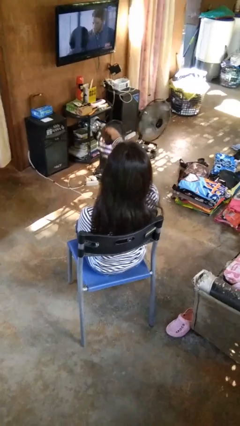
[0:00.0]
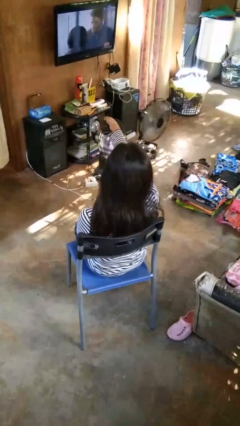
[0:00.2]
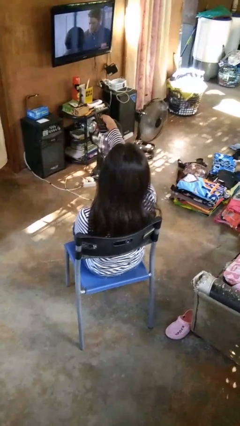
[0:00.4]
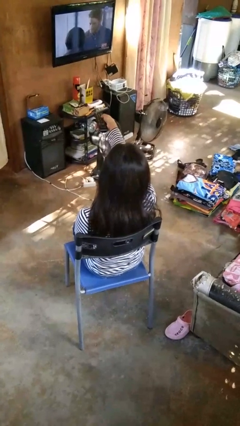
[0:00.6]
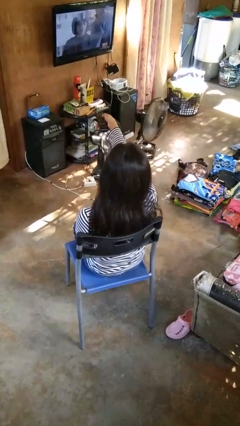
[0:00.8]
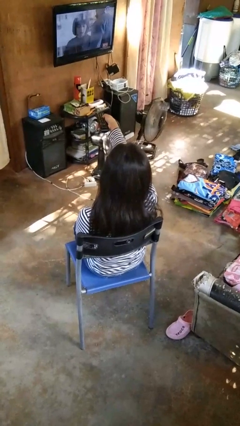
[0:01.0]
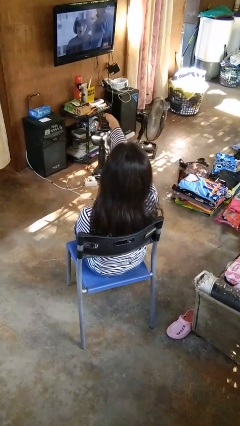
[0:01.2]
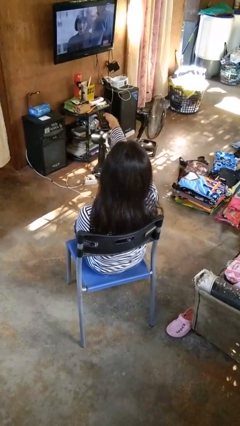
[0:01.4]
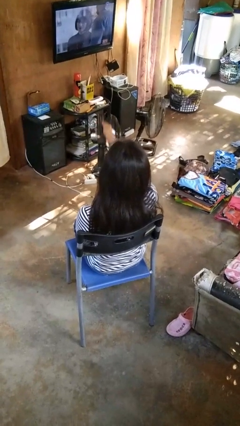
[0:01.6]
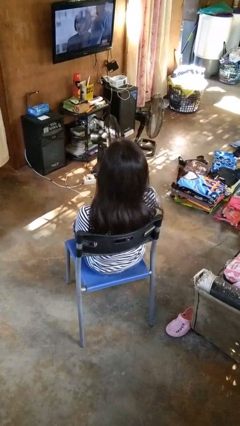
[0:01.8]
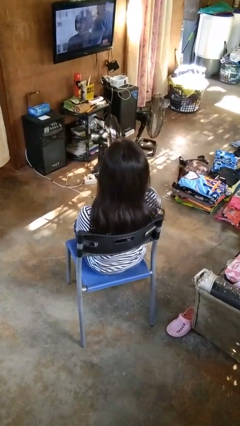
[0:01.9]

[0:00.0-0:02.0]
person uses television remote

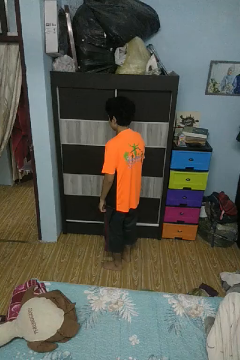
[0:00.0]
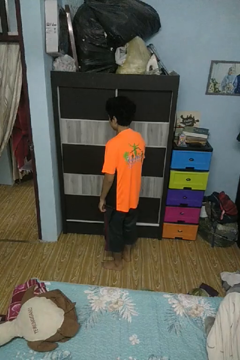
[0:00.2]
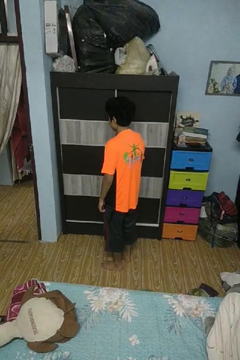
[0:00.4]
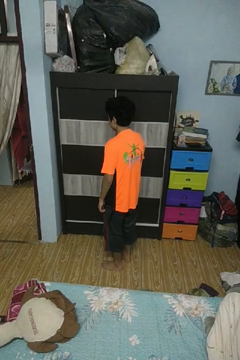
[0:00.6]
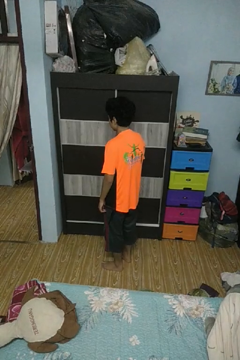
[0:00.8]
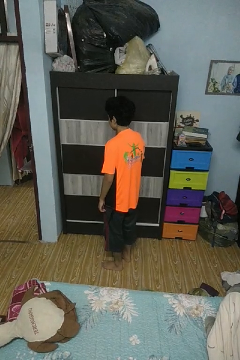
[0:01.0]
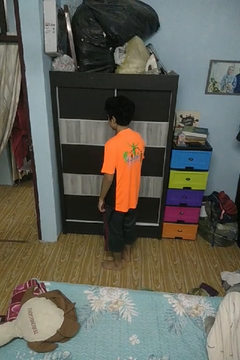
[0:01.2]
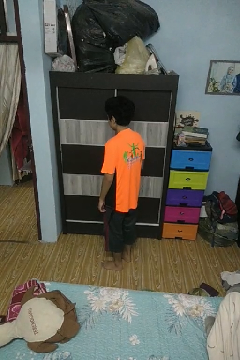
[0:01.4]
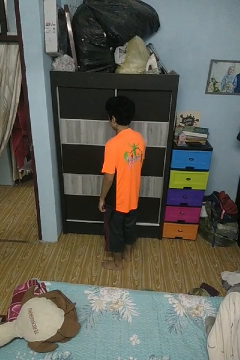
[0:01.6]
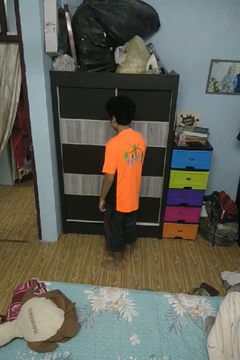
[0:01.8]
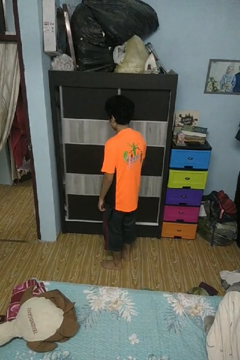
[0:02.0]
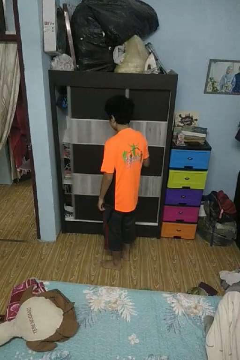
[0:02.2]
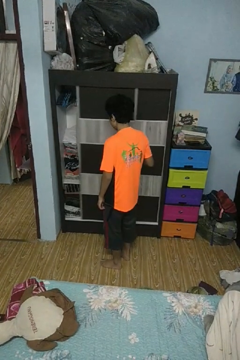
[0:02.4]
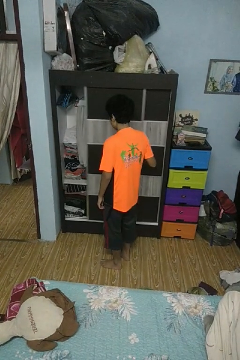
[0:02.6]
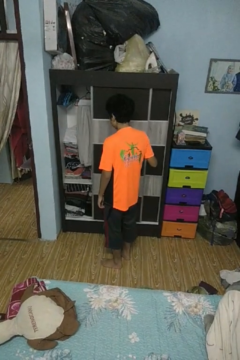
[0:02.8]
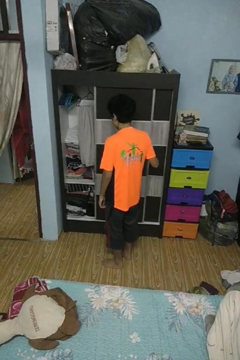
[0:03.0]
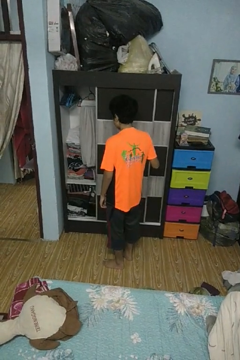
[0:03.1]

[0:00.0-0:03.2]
person opens closet door

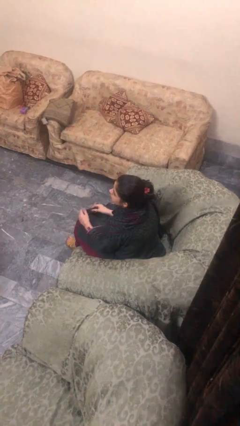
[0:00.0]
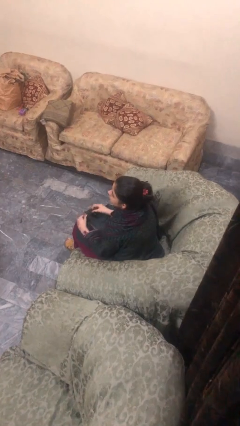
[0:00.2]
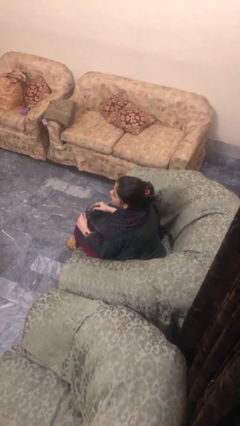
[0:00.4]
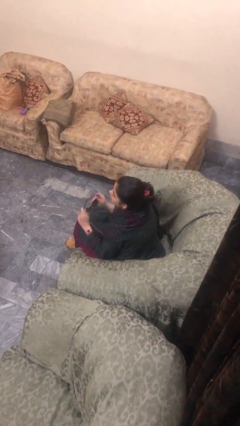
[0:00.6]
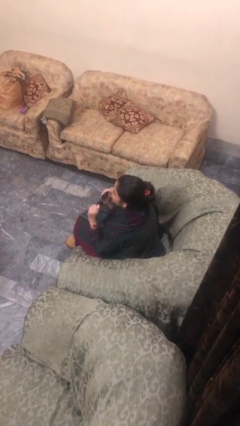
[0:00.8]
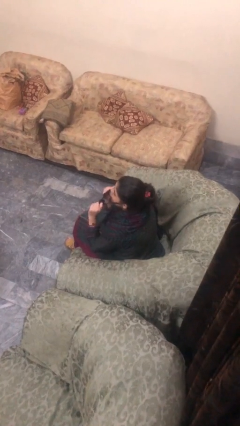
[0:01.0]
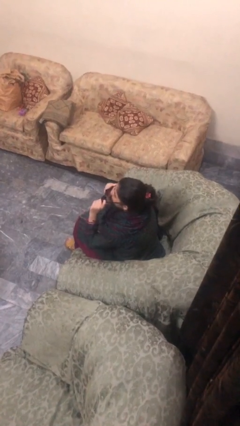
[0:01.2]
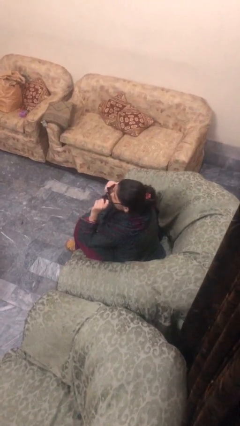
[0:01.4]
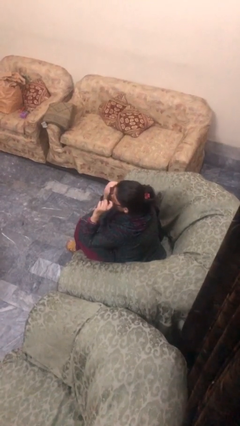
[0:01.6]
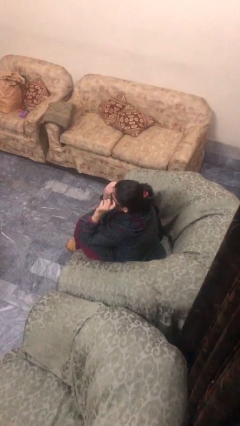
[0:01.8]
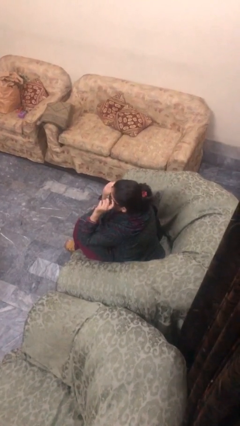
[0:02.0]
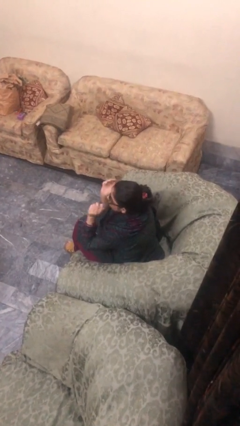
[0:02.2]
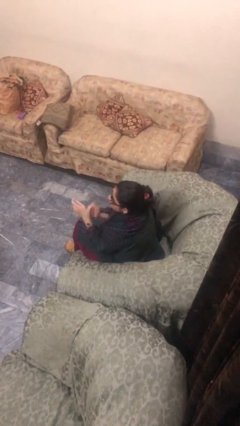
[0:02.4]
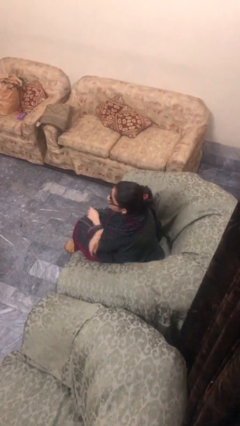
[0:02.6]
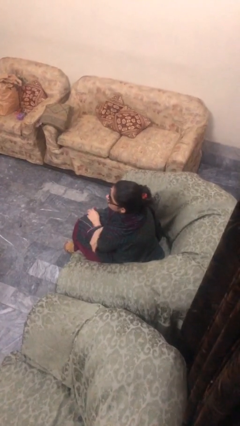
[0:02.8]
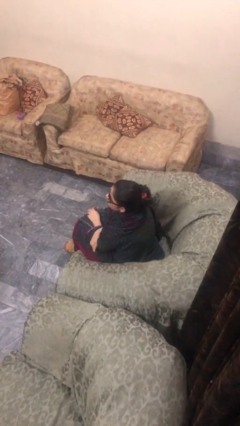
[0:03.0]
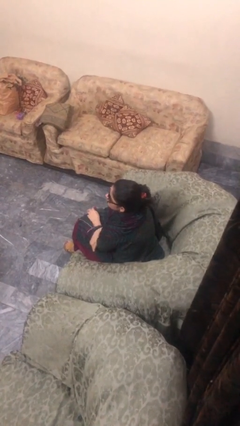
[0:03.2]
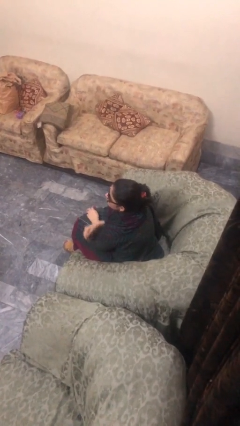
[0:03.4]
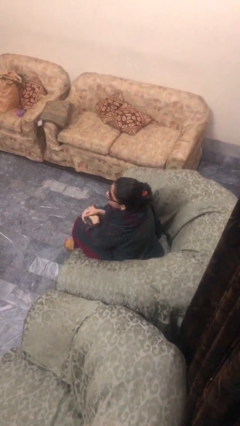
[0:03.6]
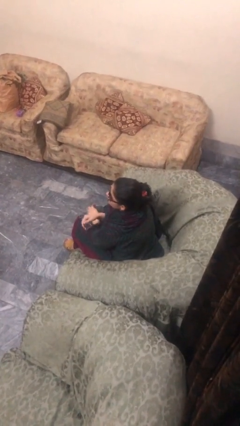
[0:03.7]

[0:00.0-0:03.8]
person puts on sunglasses

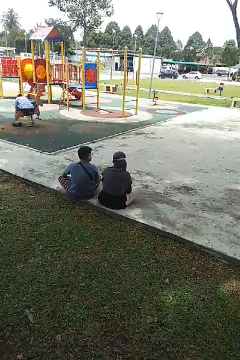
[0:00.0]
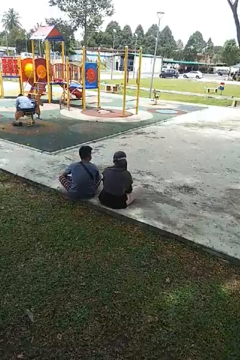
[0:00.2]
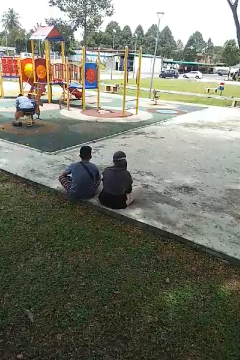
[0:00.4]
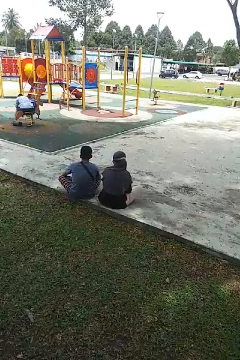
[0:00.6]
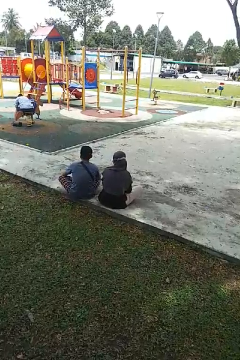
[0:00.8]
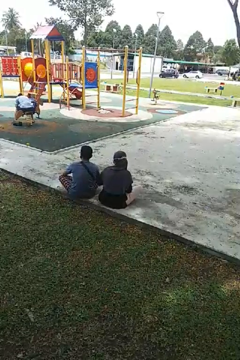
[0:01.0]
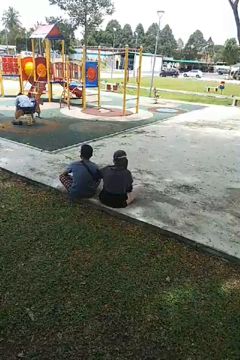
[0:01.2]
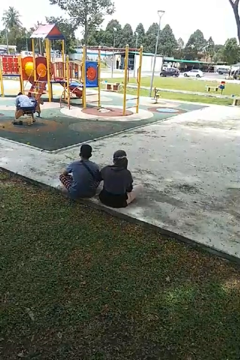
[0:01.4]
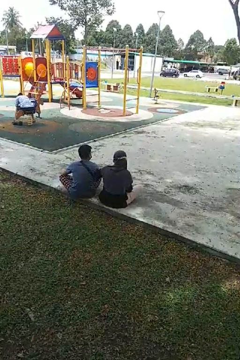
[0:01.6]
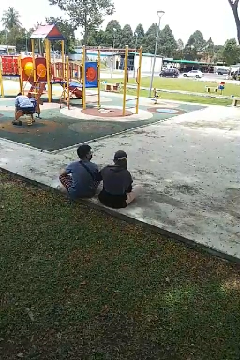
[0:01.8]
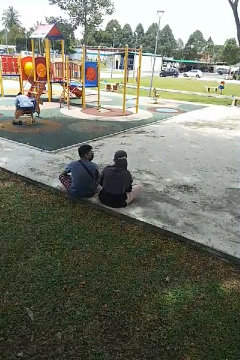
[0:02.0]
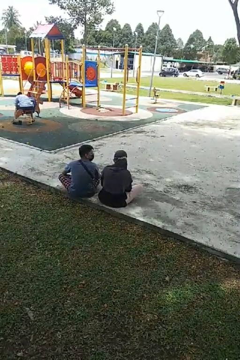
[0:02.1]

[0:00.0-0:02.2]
person nudges person with elbow

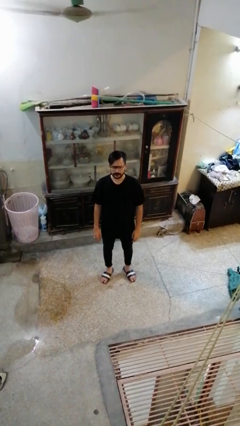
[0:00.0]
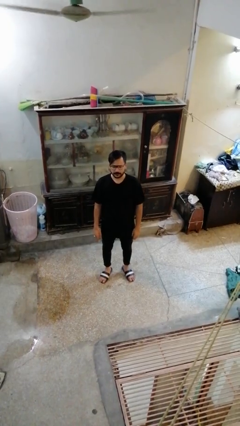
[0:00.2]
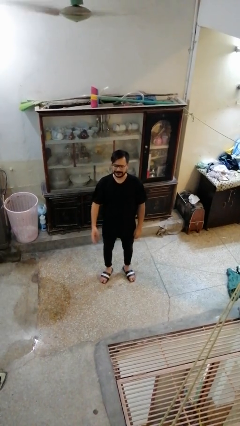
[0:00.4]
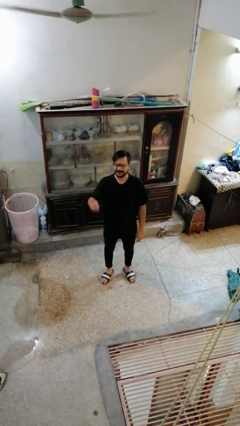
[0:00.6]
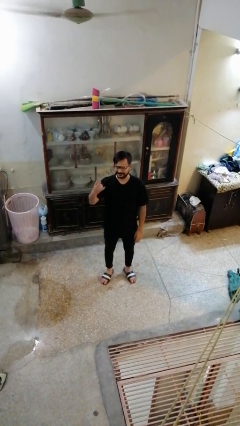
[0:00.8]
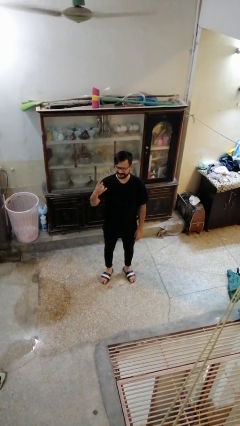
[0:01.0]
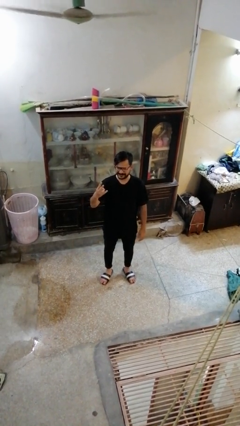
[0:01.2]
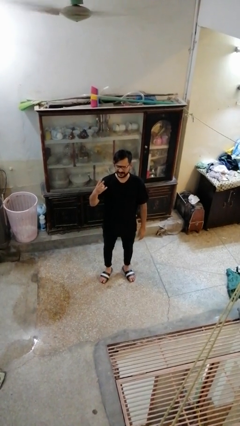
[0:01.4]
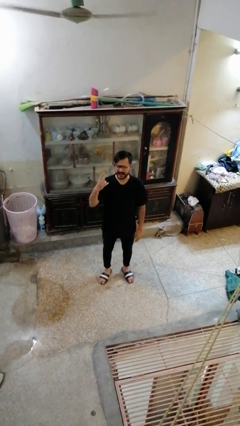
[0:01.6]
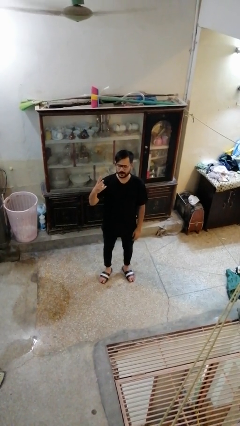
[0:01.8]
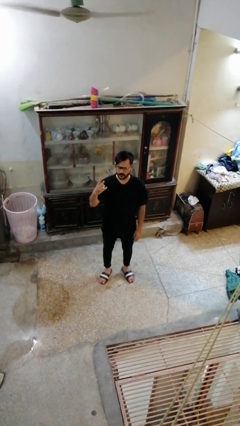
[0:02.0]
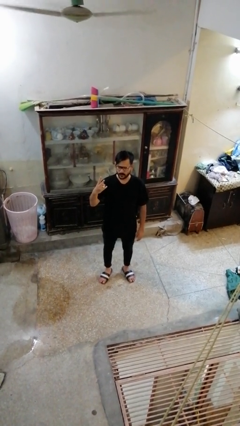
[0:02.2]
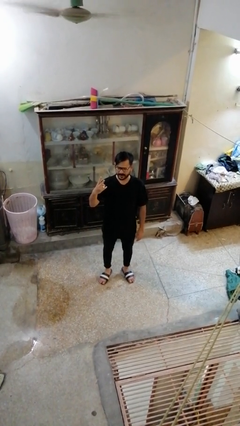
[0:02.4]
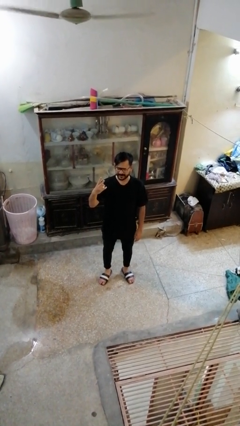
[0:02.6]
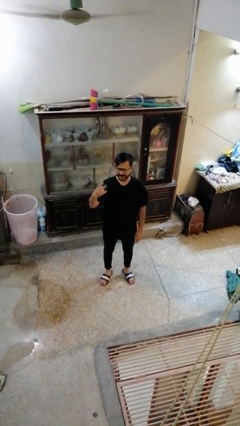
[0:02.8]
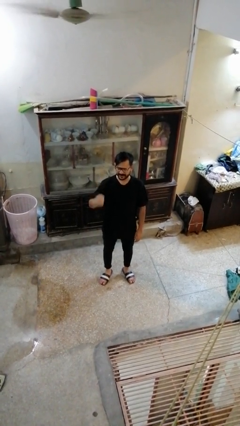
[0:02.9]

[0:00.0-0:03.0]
person gestures peace

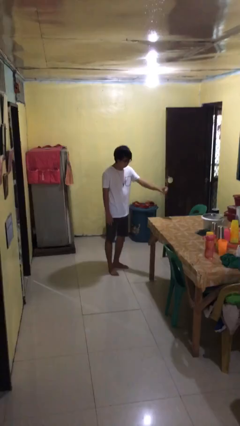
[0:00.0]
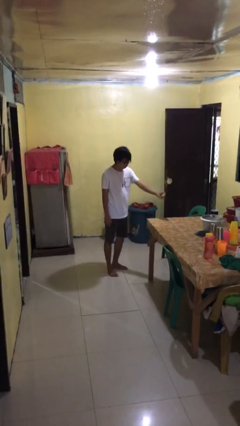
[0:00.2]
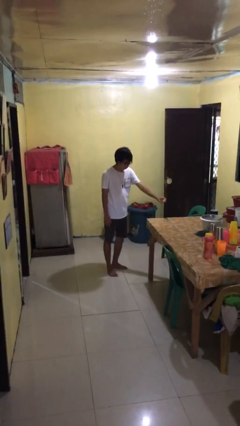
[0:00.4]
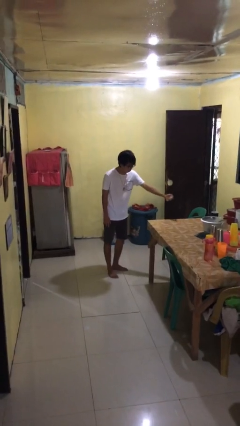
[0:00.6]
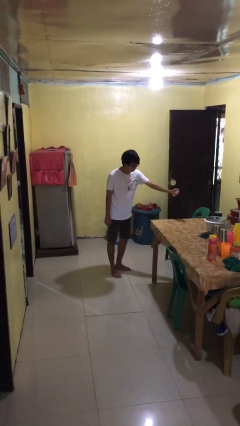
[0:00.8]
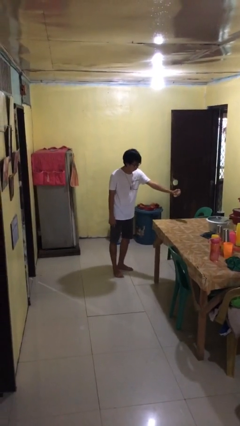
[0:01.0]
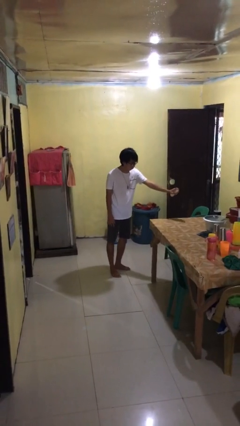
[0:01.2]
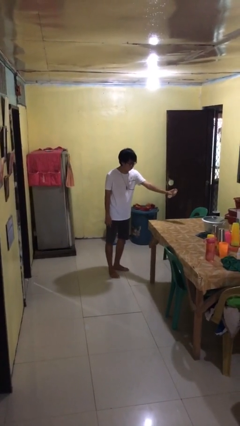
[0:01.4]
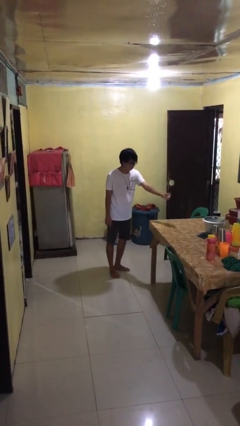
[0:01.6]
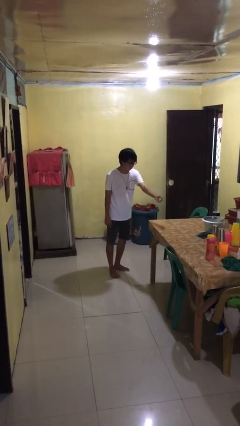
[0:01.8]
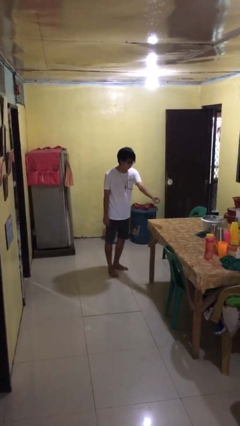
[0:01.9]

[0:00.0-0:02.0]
person sprays from bottle

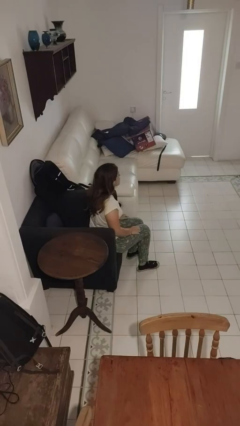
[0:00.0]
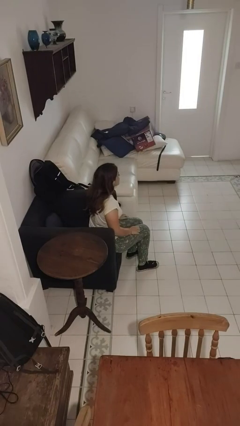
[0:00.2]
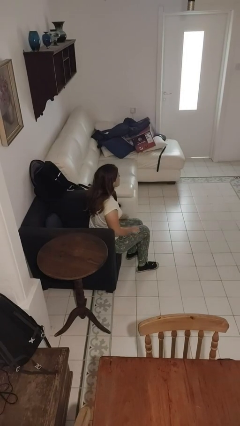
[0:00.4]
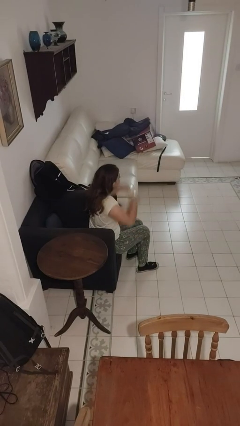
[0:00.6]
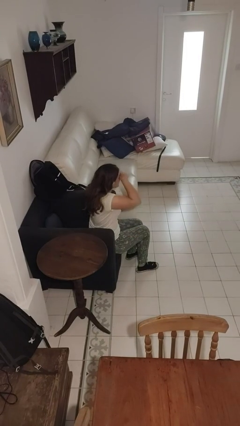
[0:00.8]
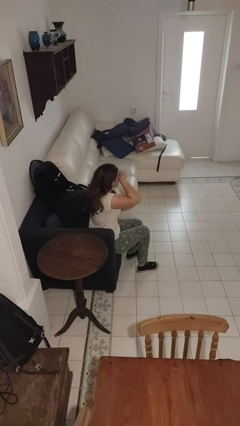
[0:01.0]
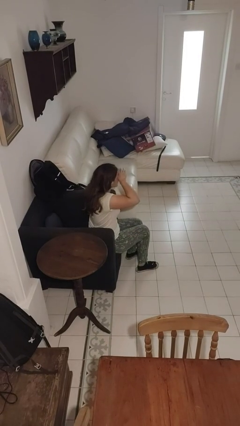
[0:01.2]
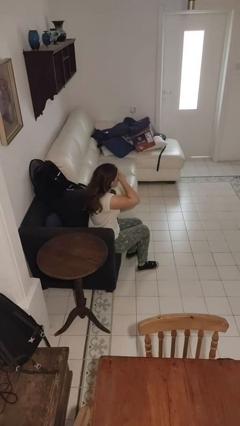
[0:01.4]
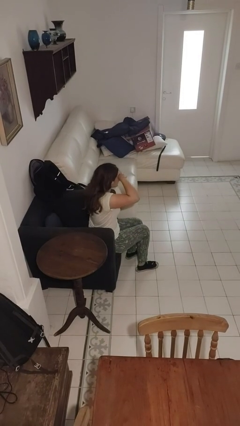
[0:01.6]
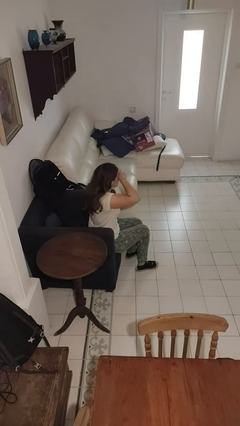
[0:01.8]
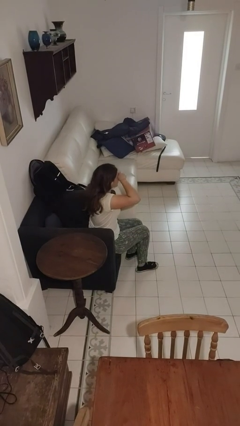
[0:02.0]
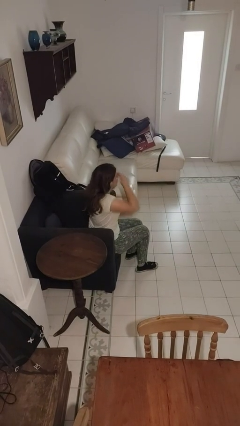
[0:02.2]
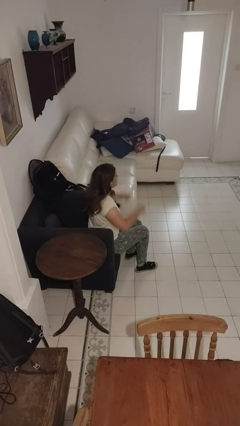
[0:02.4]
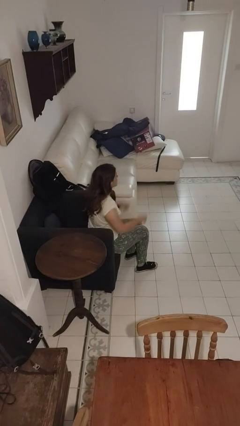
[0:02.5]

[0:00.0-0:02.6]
person rubs eyes
